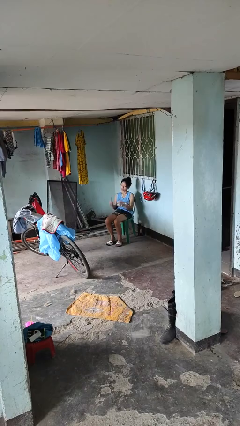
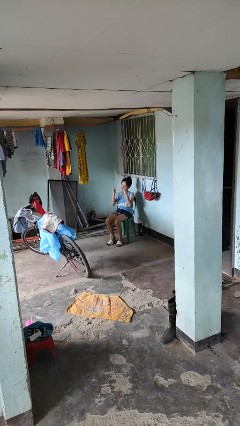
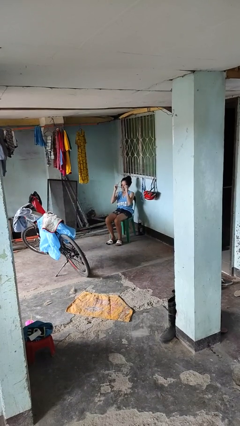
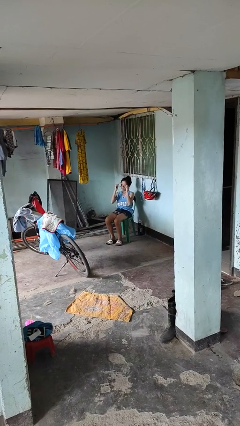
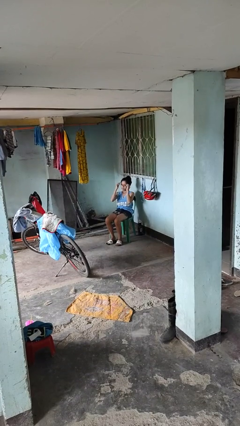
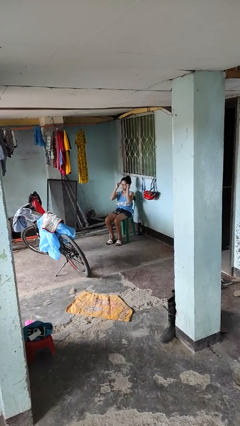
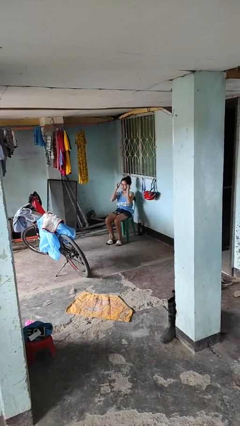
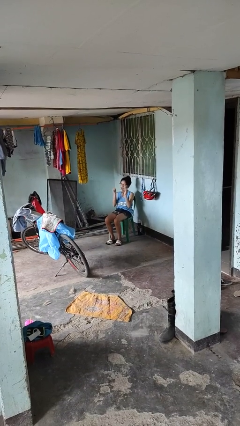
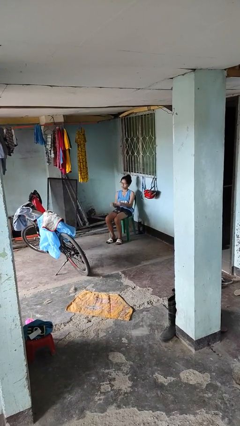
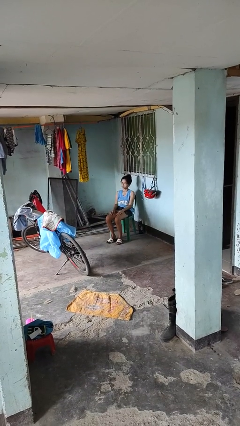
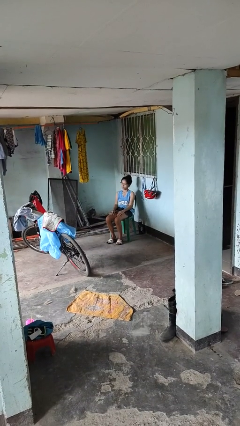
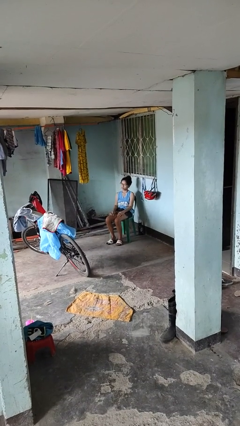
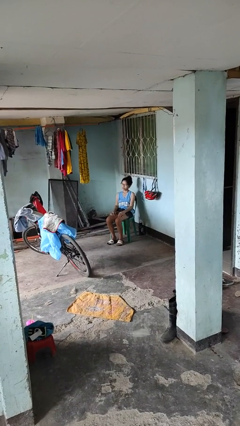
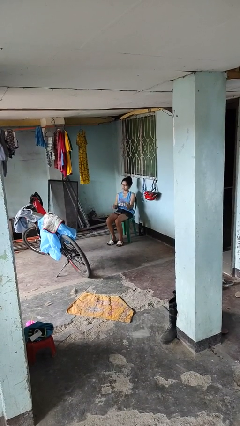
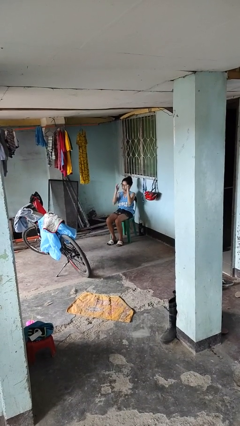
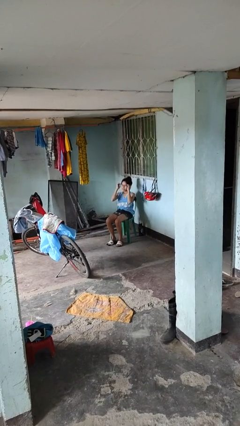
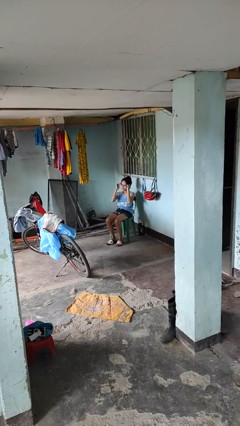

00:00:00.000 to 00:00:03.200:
person puts on glasses

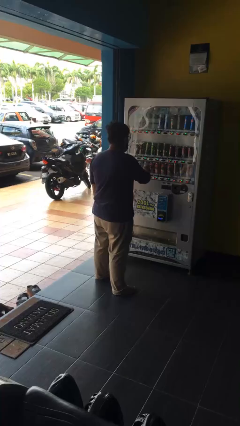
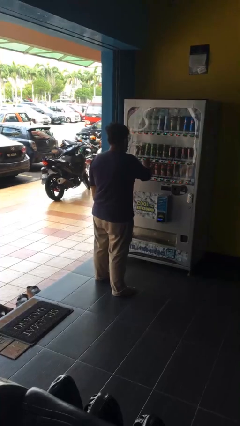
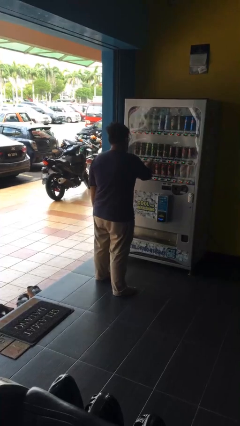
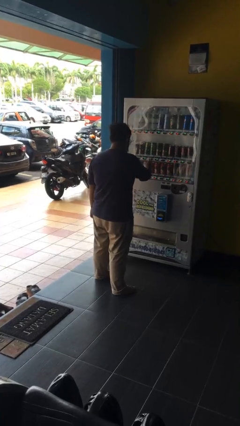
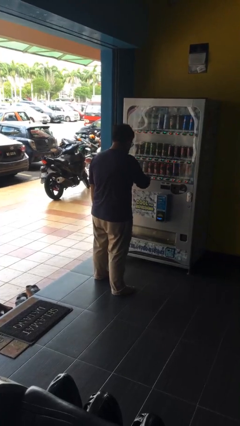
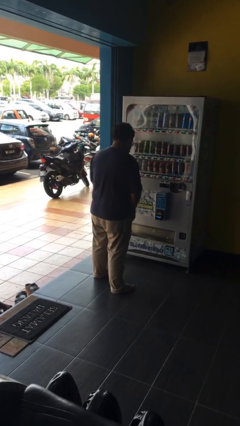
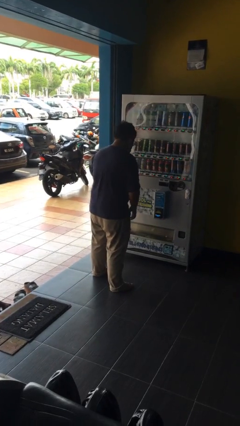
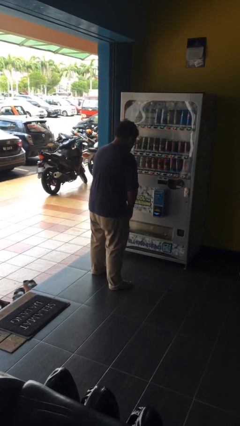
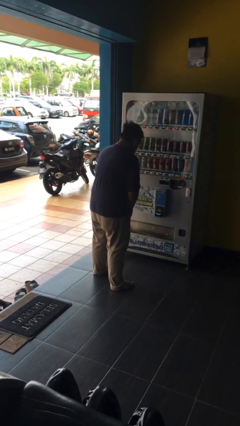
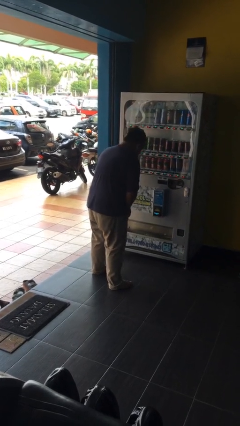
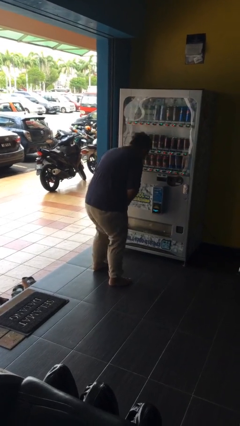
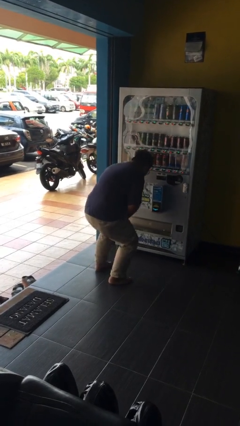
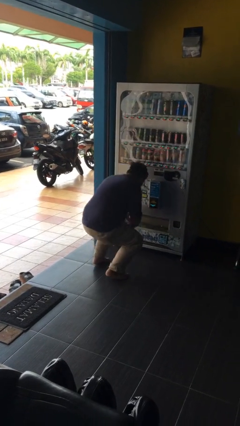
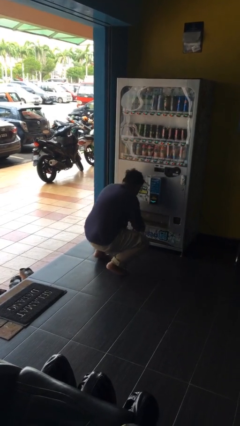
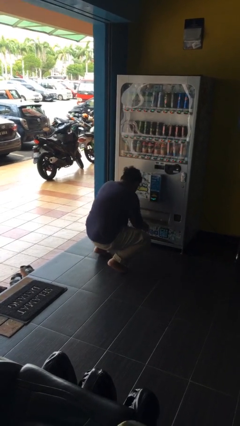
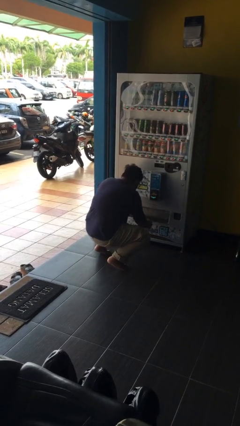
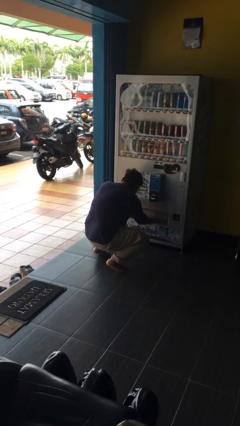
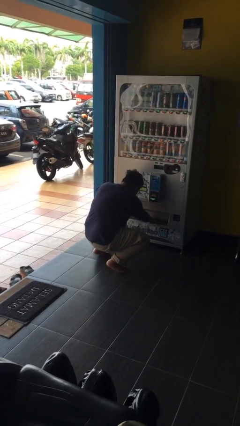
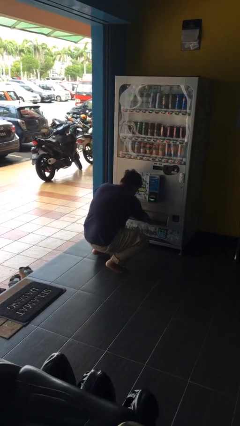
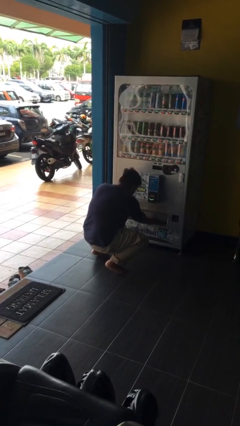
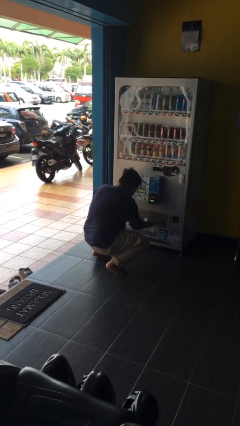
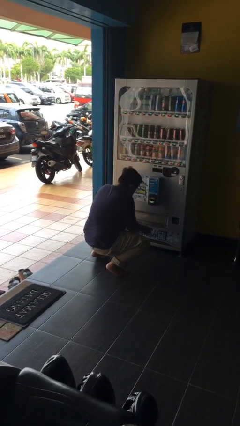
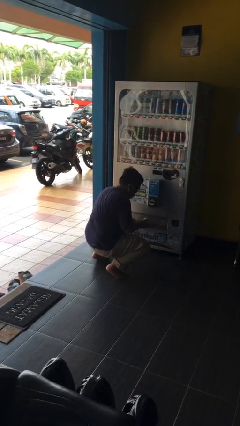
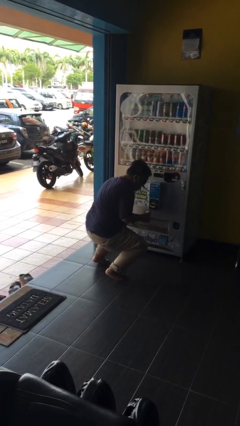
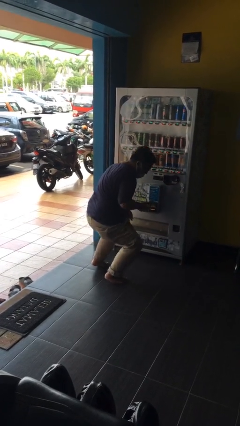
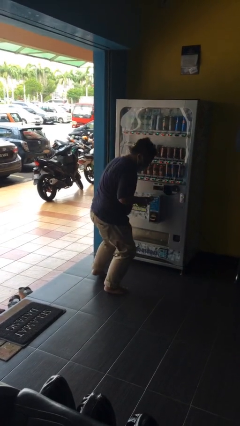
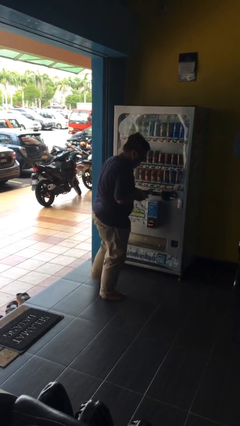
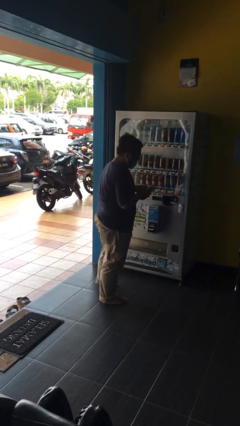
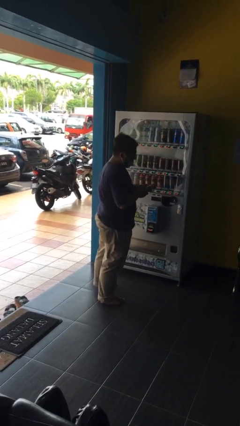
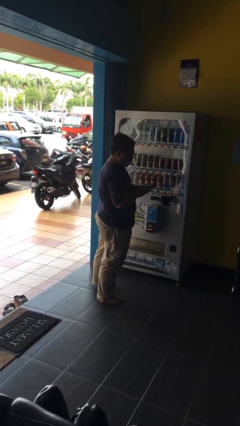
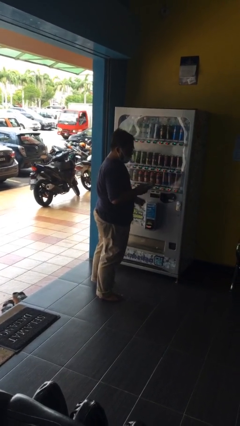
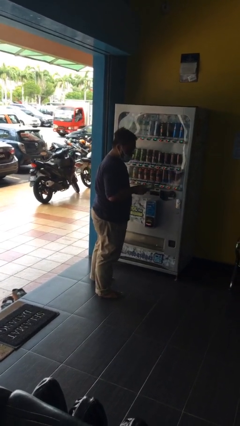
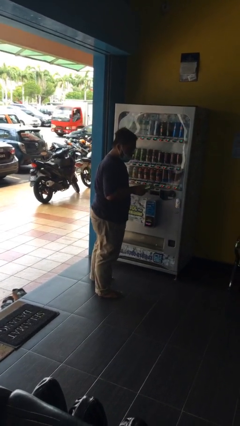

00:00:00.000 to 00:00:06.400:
person purchases from machine

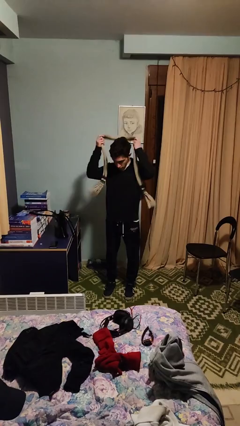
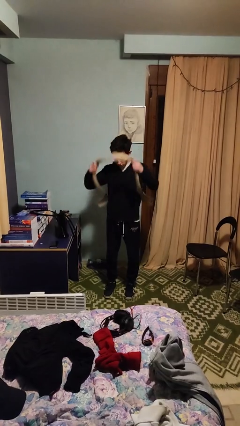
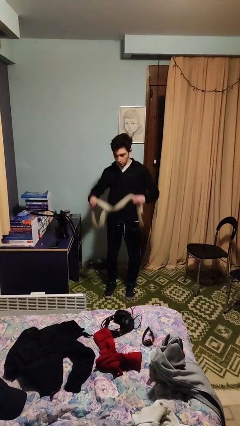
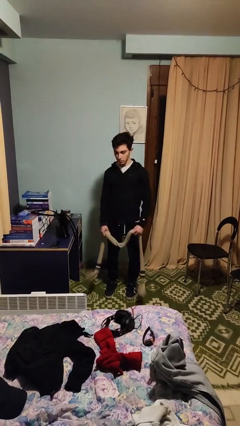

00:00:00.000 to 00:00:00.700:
person takes off scarf

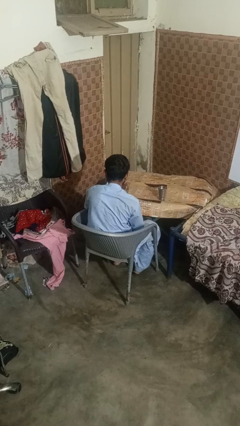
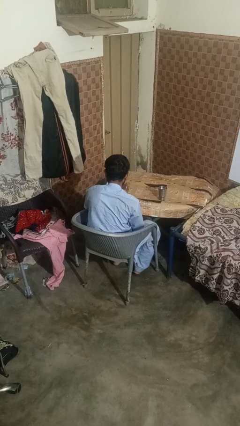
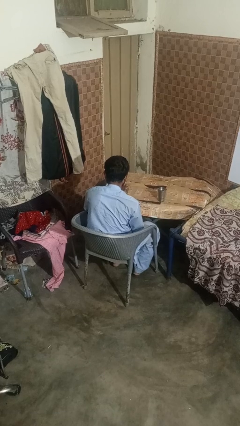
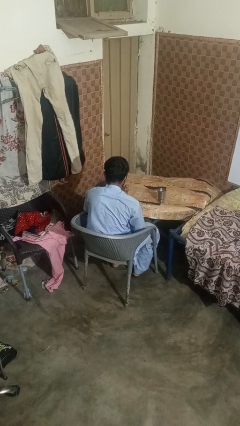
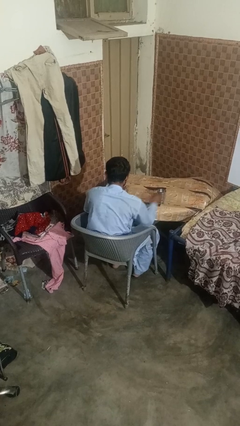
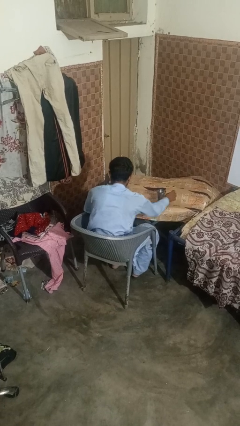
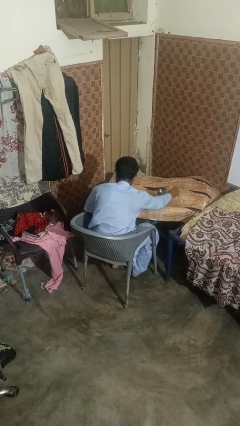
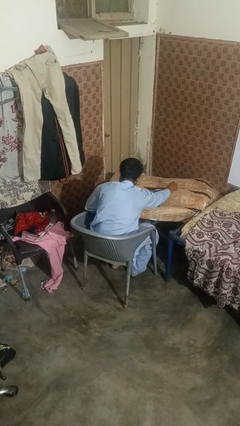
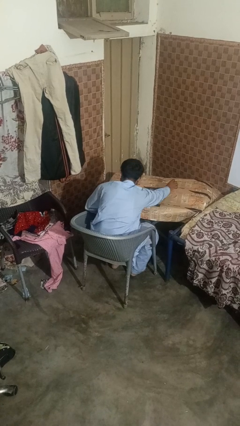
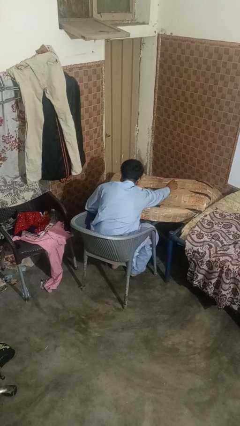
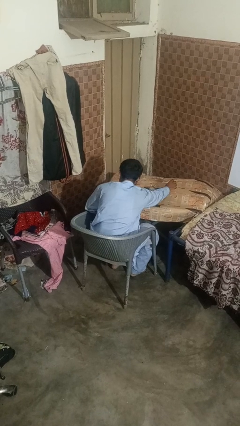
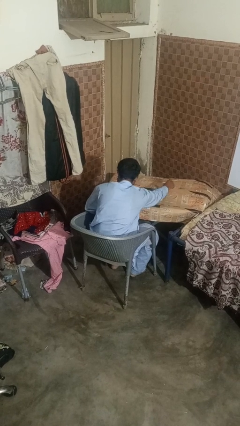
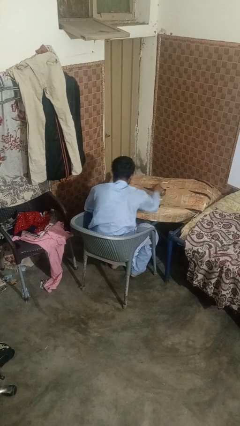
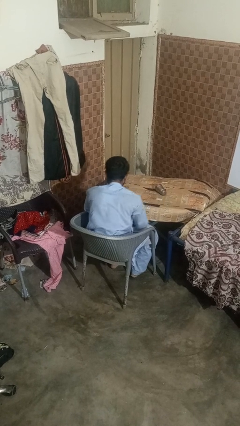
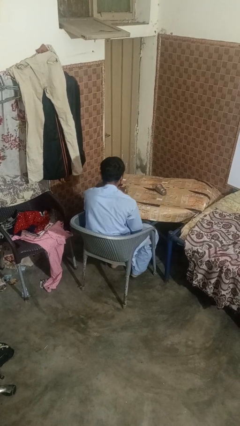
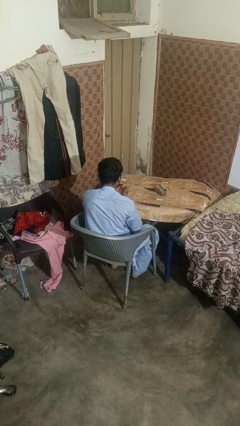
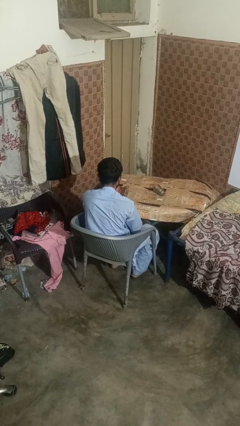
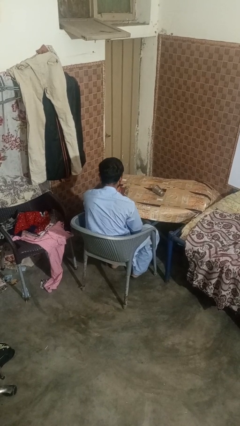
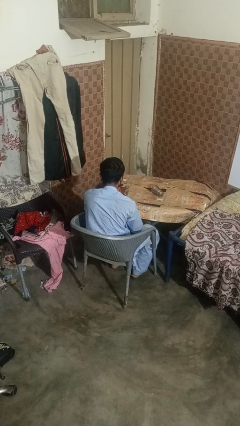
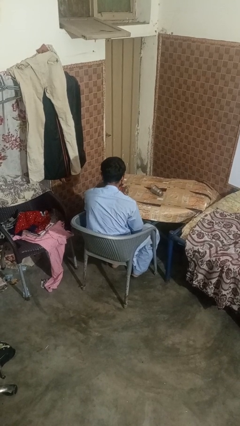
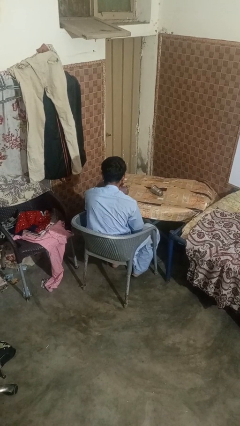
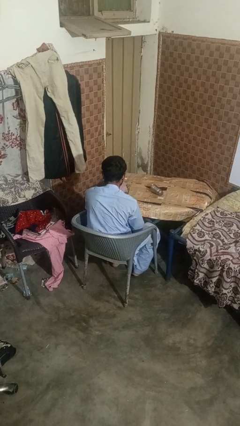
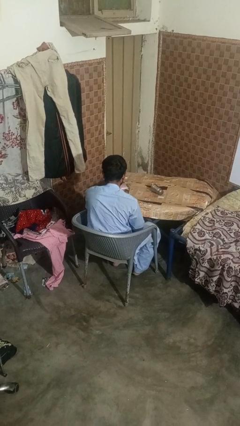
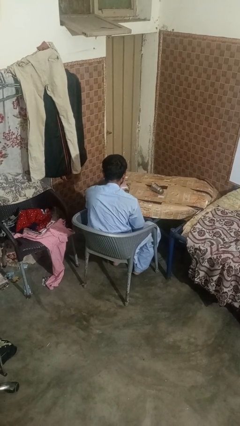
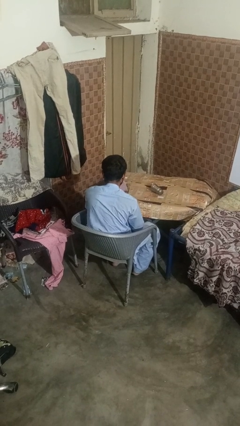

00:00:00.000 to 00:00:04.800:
person knocks over glass

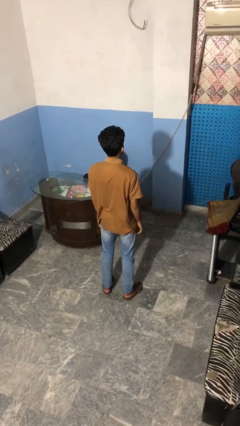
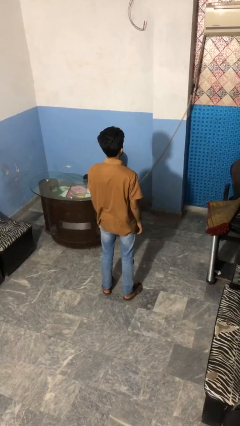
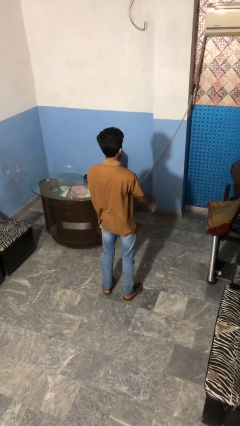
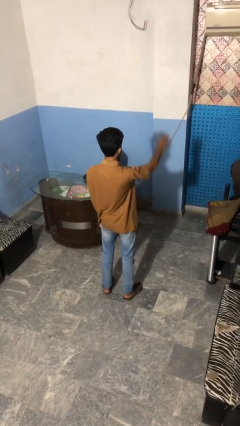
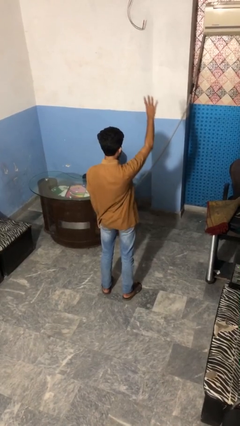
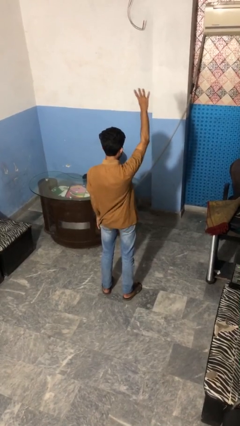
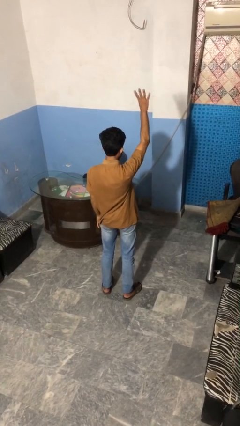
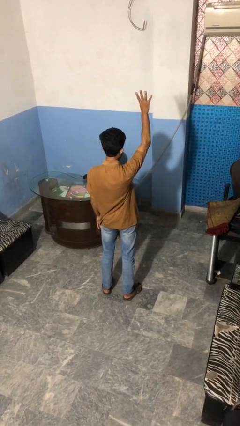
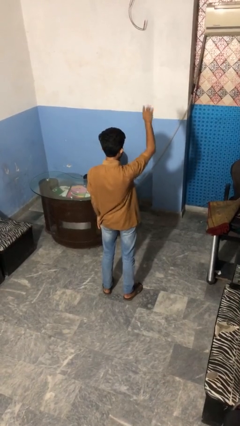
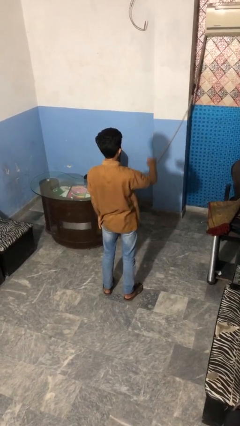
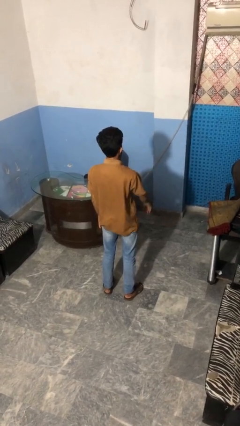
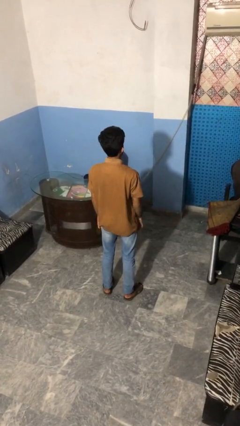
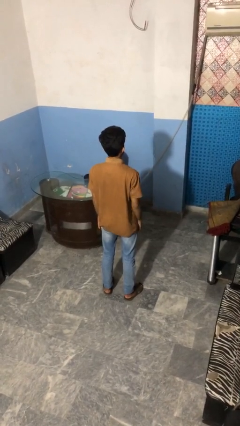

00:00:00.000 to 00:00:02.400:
person gestures number four

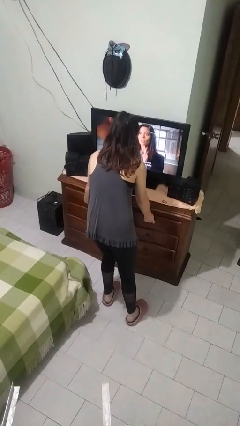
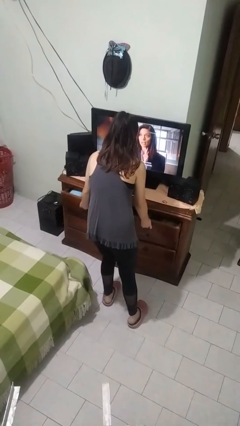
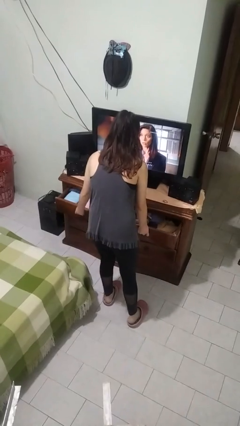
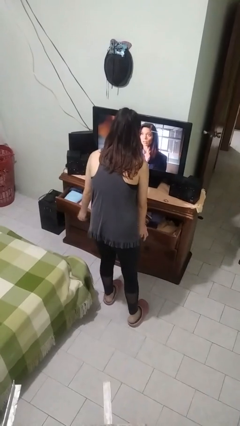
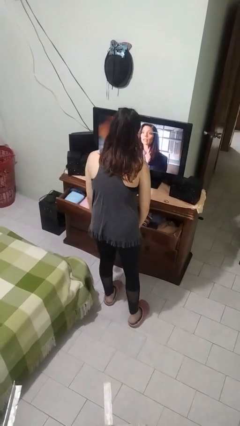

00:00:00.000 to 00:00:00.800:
person opens dresser drawer
